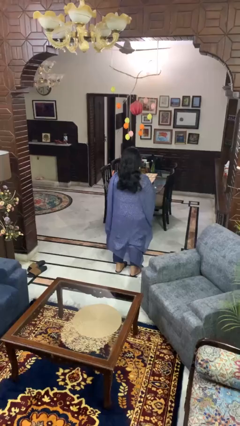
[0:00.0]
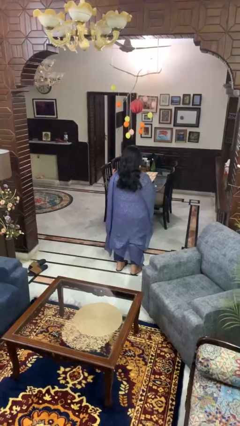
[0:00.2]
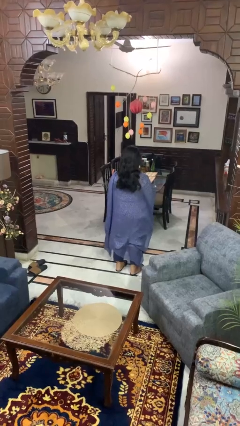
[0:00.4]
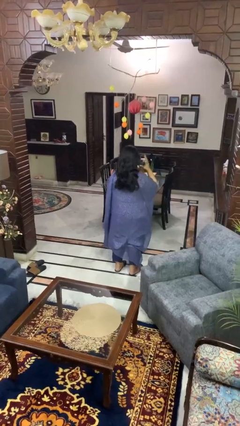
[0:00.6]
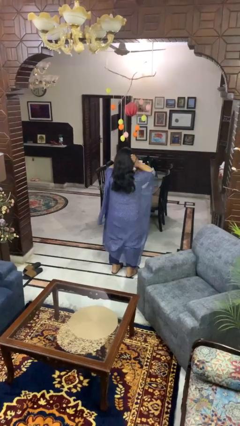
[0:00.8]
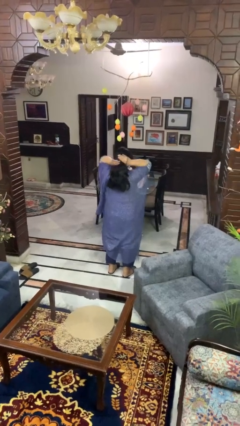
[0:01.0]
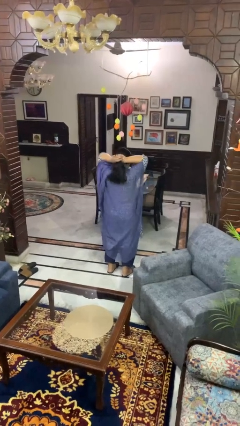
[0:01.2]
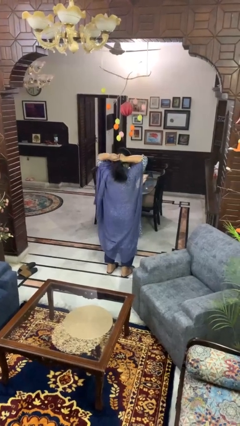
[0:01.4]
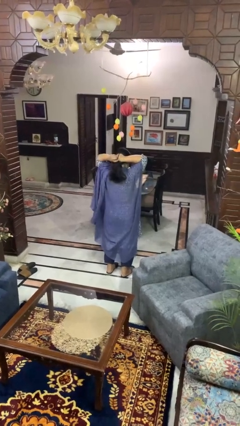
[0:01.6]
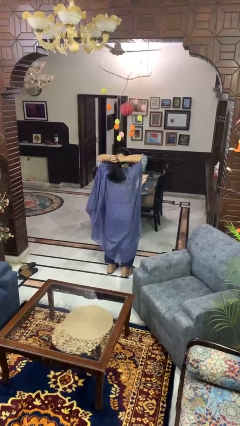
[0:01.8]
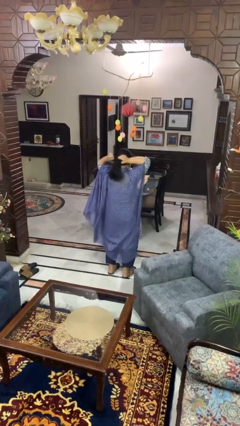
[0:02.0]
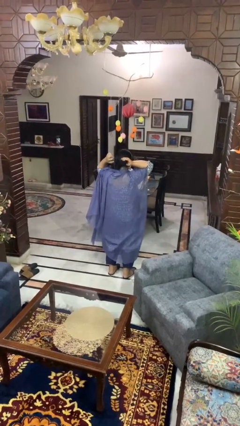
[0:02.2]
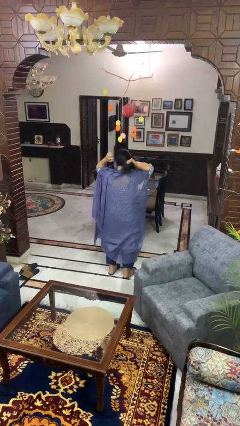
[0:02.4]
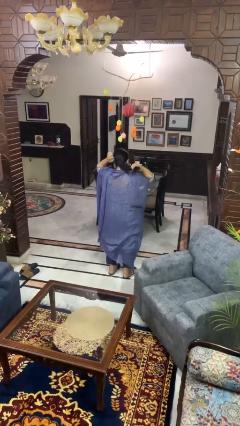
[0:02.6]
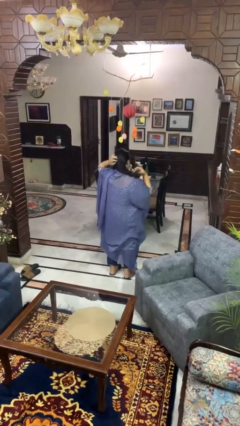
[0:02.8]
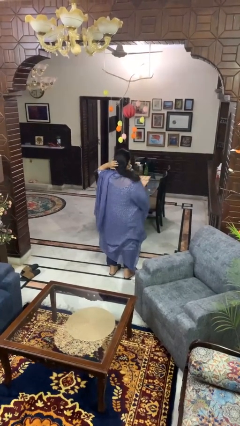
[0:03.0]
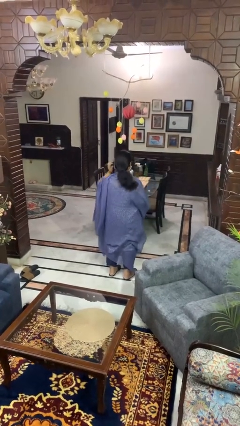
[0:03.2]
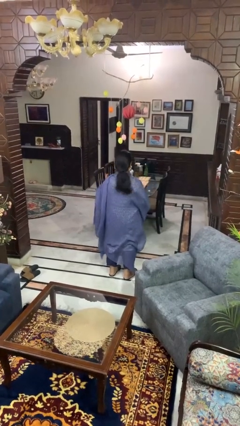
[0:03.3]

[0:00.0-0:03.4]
person puts hair in ponytail

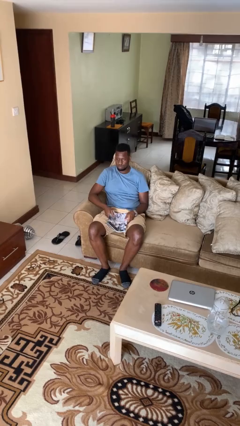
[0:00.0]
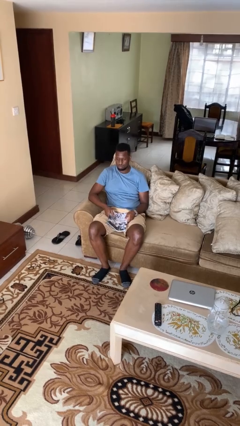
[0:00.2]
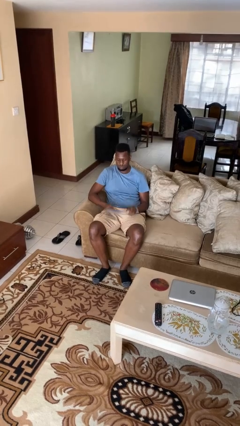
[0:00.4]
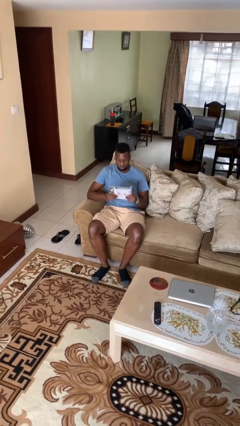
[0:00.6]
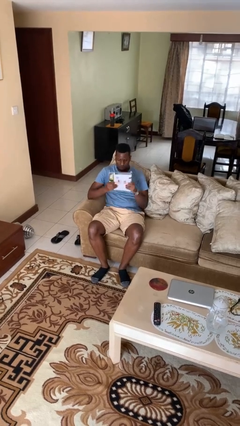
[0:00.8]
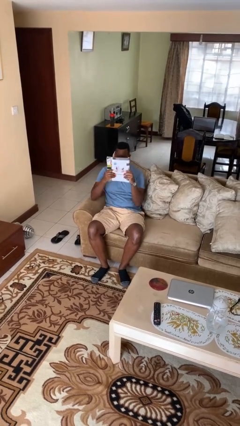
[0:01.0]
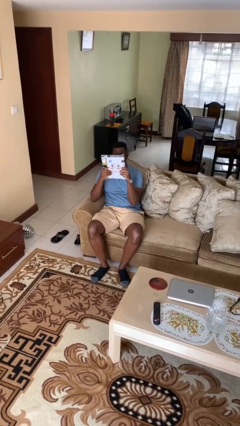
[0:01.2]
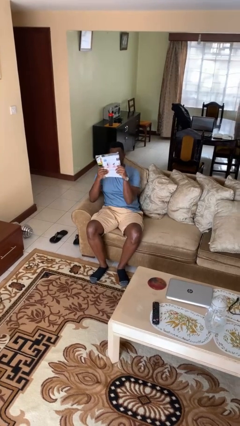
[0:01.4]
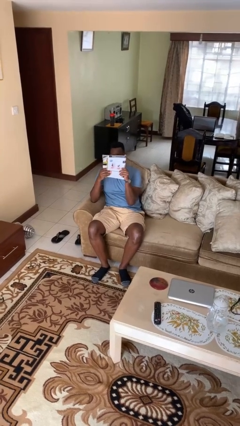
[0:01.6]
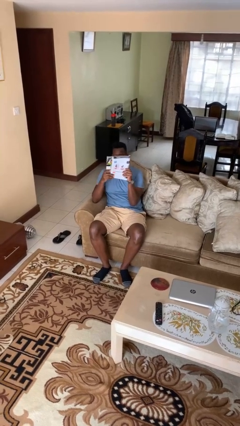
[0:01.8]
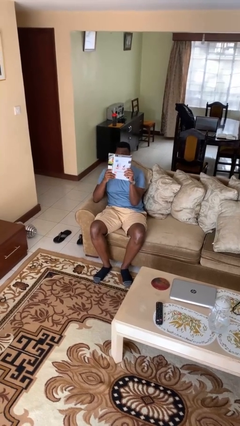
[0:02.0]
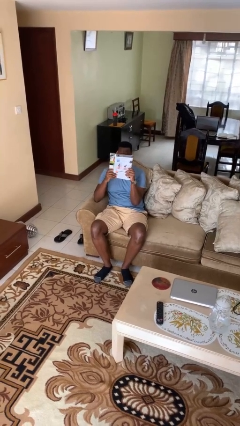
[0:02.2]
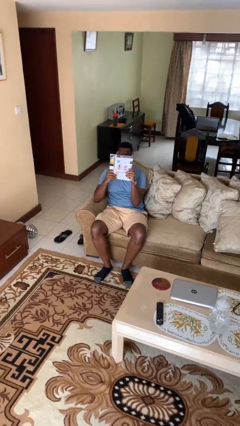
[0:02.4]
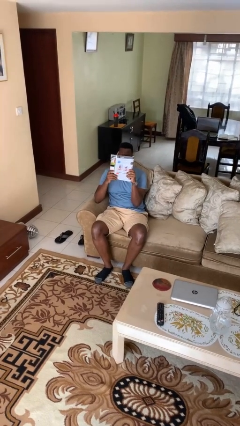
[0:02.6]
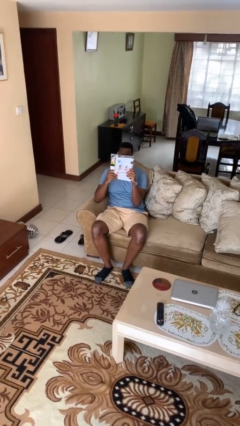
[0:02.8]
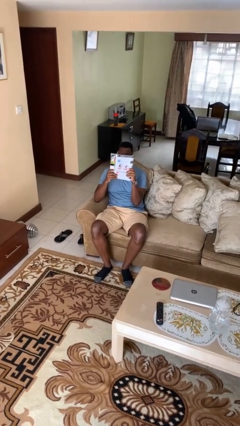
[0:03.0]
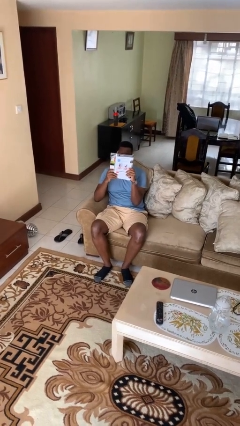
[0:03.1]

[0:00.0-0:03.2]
person reads document

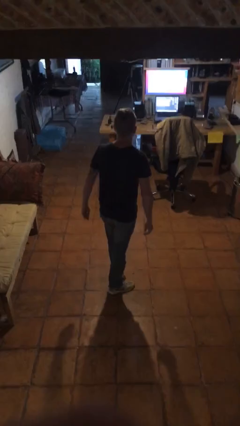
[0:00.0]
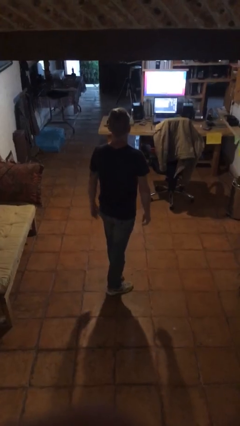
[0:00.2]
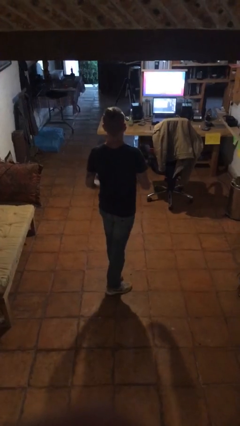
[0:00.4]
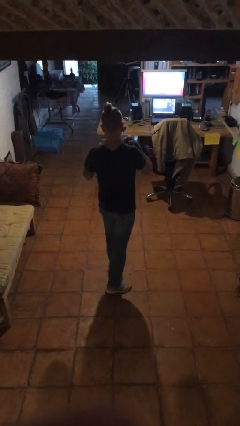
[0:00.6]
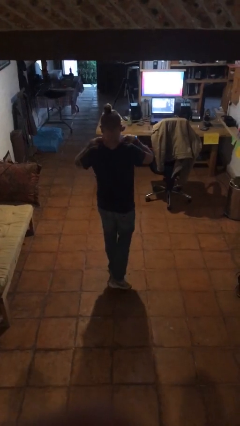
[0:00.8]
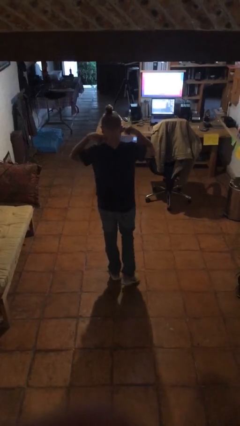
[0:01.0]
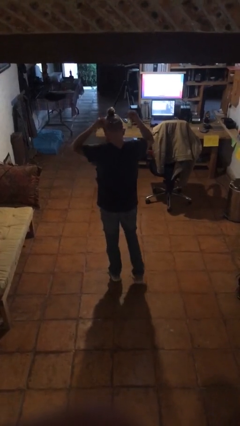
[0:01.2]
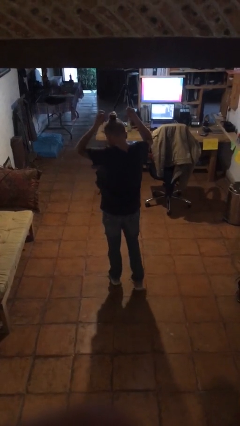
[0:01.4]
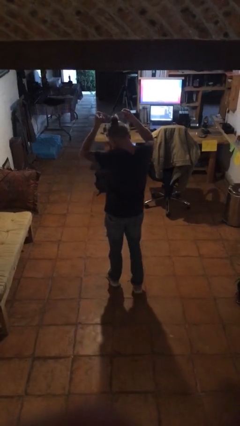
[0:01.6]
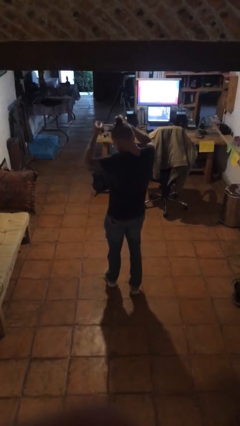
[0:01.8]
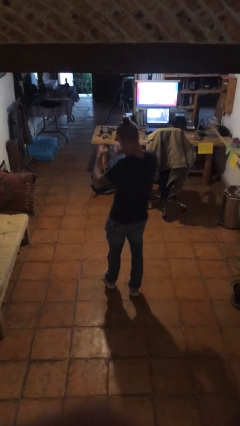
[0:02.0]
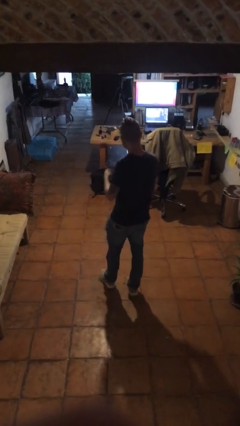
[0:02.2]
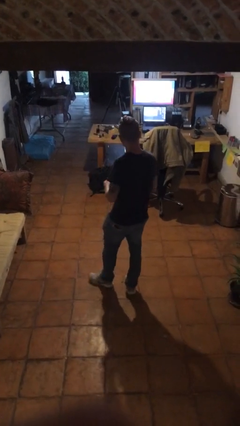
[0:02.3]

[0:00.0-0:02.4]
person takes off necklace

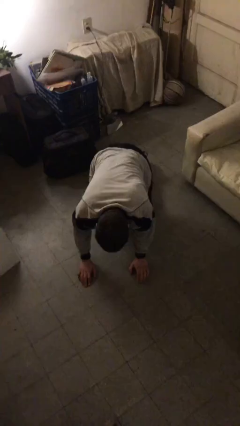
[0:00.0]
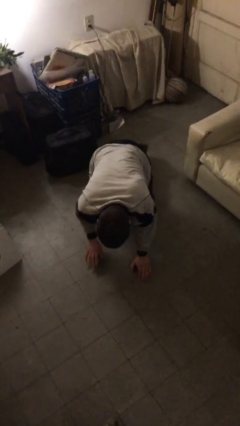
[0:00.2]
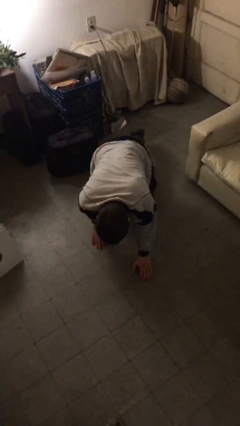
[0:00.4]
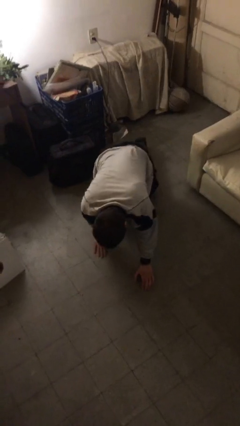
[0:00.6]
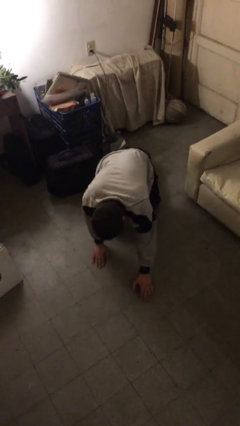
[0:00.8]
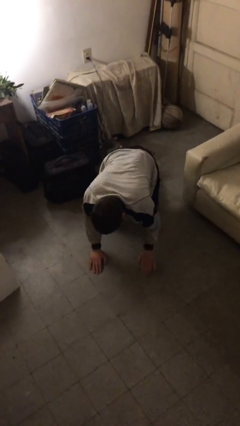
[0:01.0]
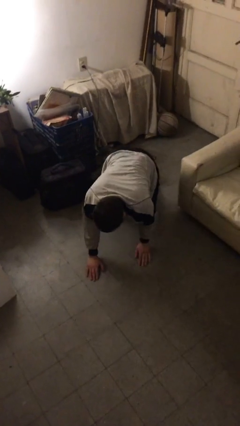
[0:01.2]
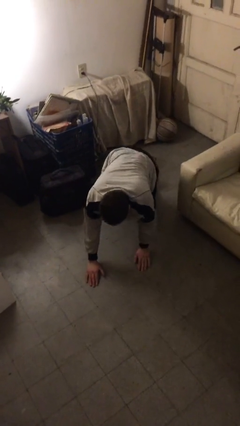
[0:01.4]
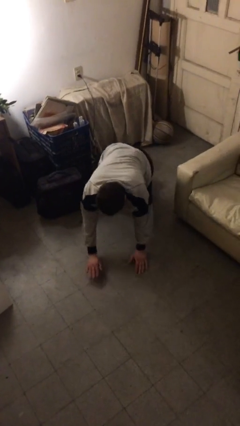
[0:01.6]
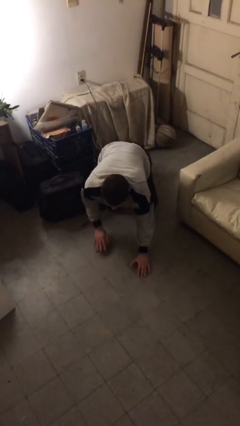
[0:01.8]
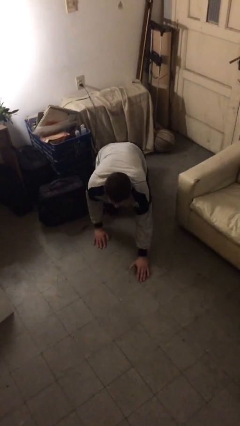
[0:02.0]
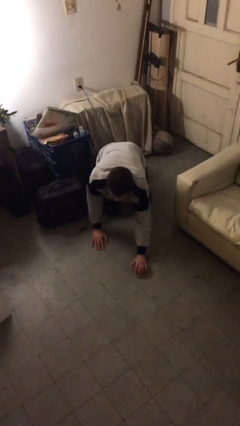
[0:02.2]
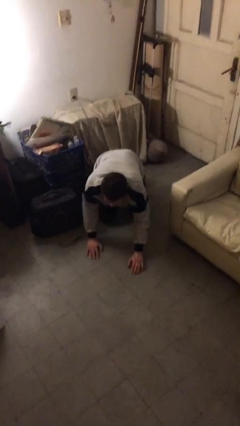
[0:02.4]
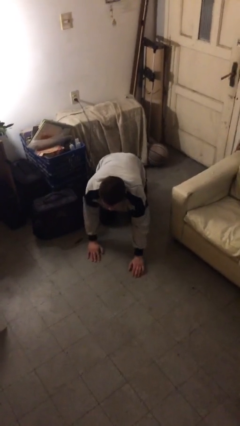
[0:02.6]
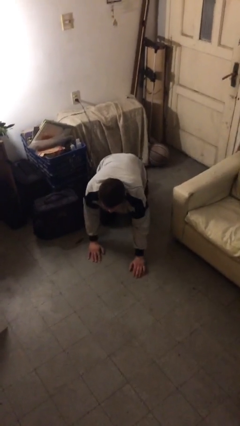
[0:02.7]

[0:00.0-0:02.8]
person crawls

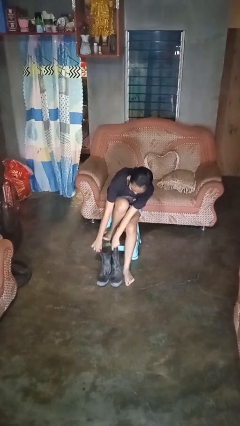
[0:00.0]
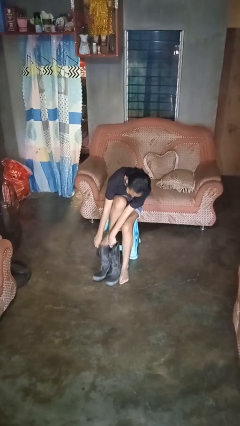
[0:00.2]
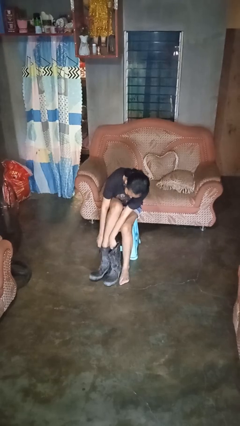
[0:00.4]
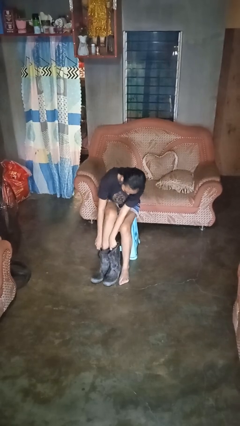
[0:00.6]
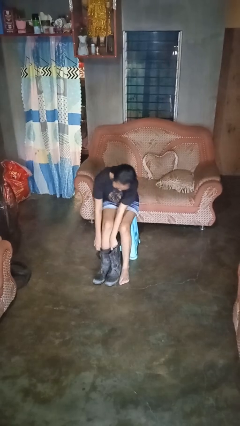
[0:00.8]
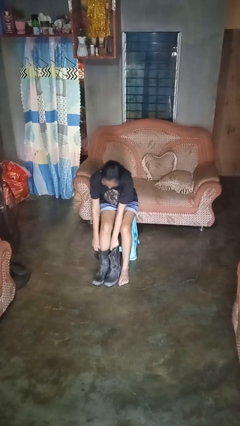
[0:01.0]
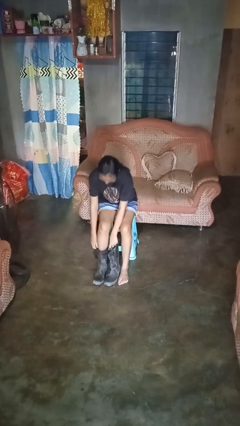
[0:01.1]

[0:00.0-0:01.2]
person puts on boots

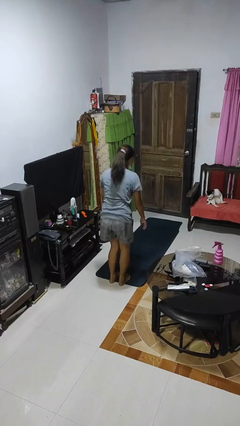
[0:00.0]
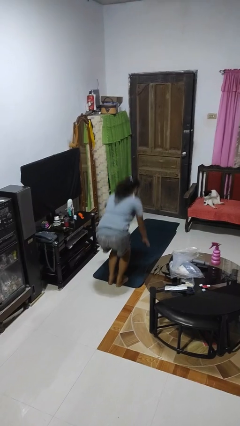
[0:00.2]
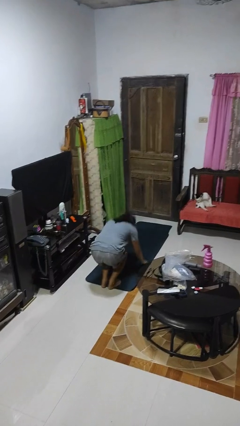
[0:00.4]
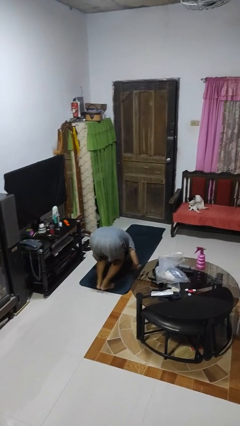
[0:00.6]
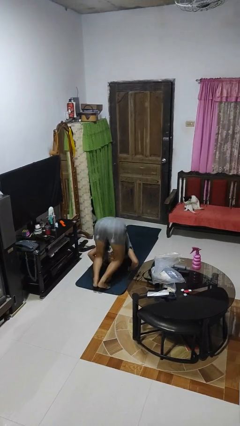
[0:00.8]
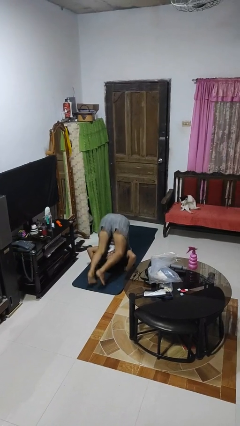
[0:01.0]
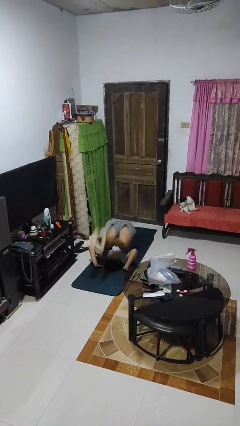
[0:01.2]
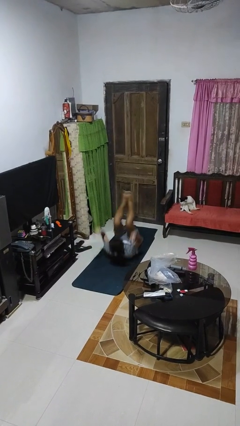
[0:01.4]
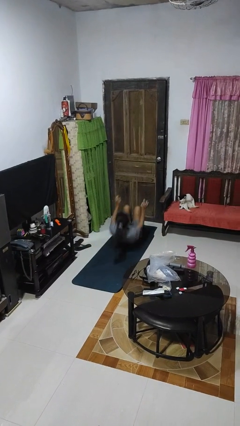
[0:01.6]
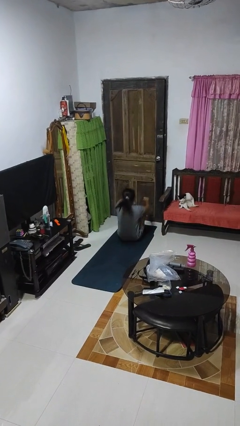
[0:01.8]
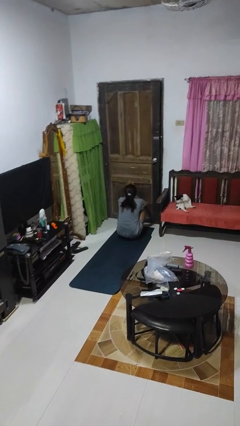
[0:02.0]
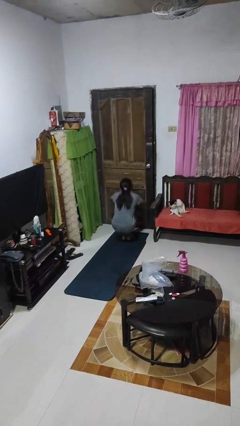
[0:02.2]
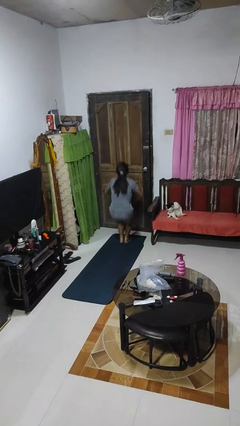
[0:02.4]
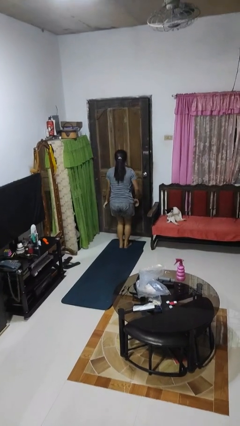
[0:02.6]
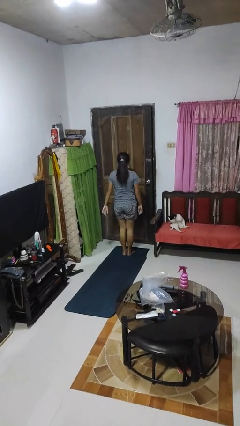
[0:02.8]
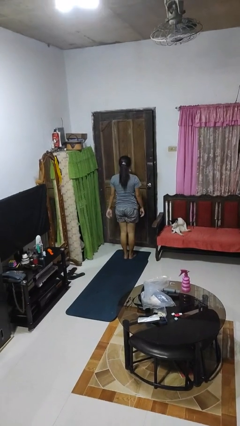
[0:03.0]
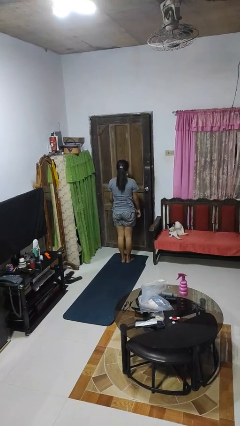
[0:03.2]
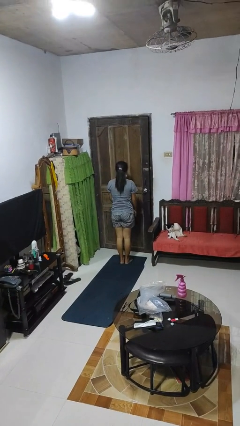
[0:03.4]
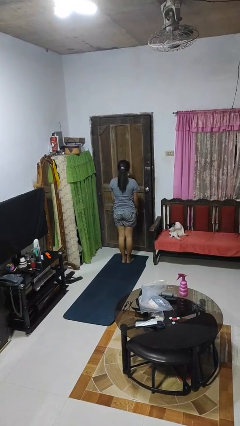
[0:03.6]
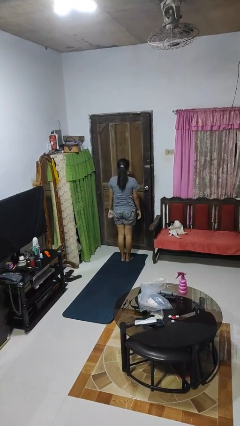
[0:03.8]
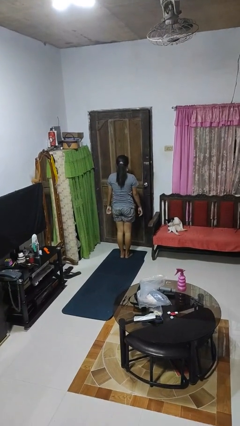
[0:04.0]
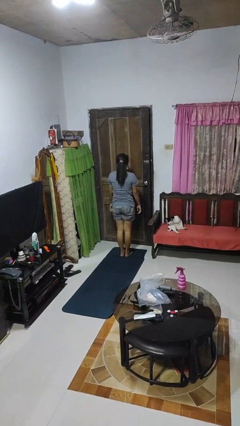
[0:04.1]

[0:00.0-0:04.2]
person somersaults
